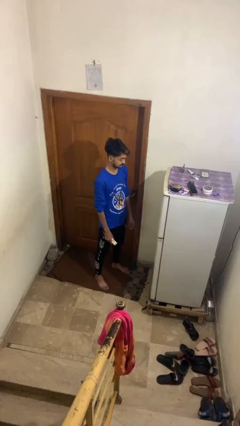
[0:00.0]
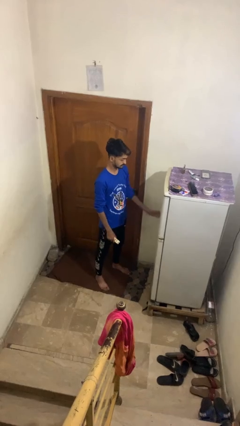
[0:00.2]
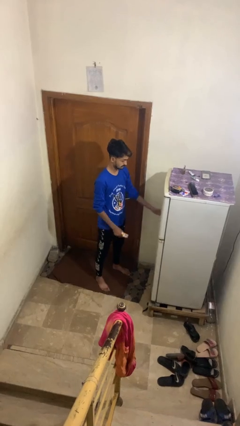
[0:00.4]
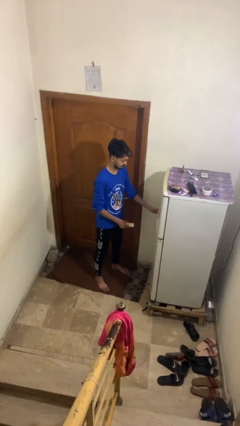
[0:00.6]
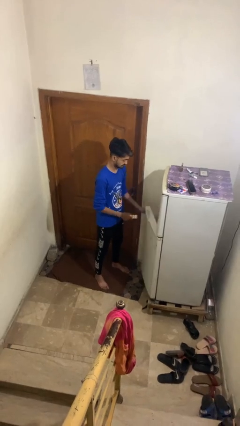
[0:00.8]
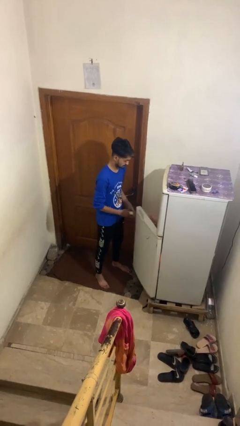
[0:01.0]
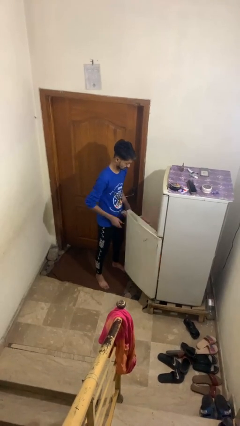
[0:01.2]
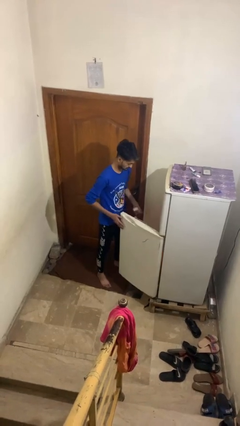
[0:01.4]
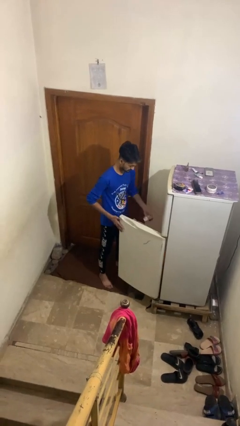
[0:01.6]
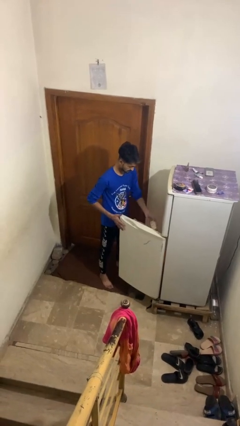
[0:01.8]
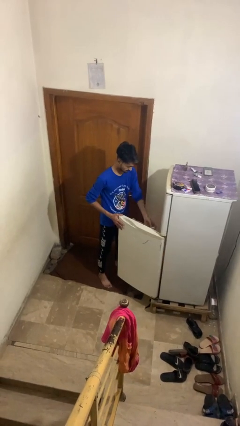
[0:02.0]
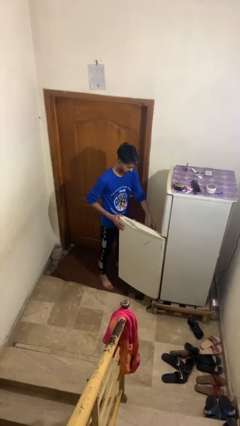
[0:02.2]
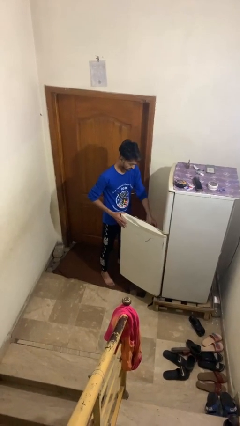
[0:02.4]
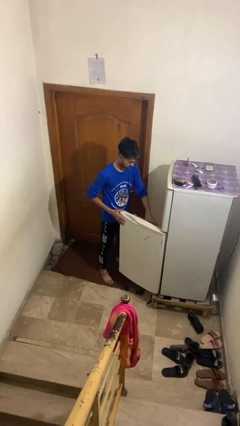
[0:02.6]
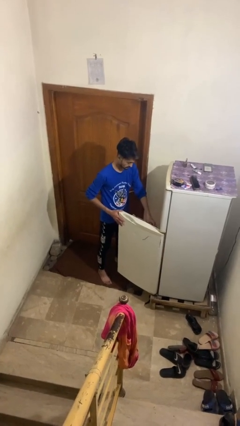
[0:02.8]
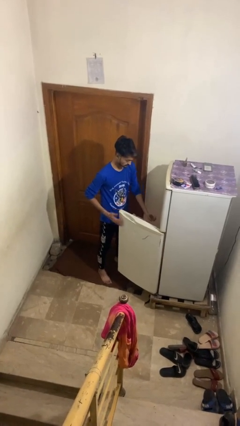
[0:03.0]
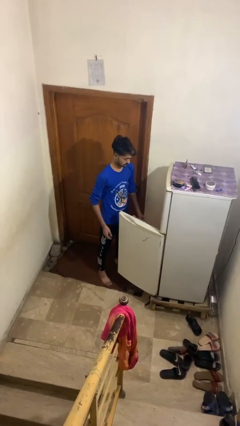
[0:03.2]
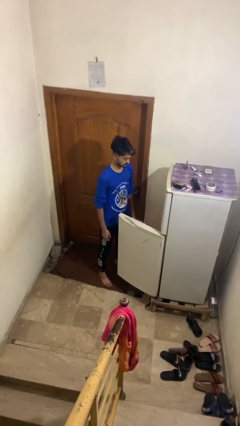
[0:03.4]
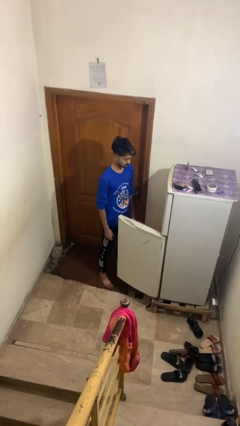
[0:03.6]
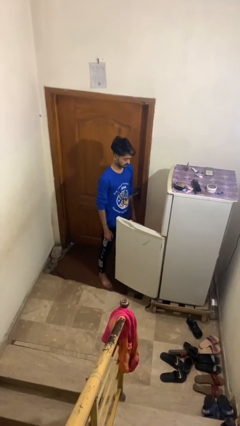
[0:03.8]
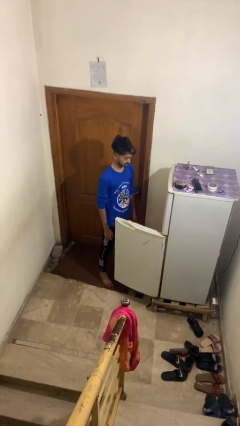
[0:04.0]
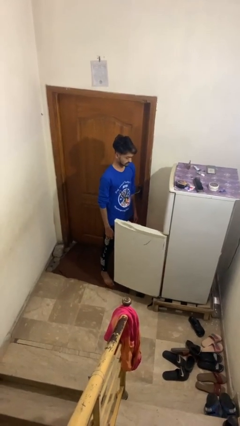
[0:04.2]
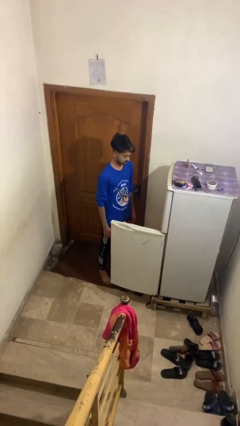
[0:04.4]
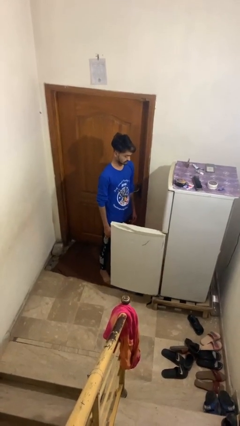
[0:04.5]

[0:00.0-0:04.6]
person puts object into refrigerator

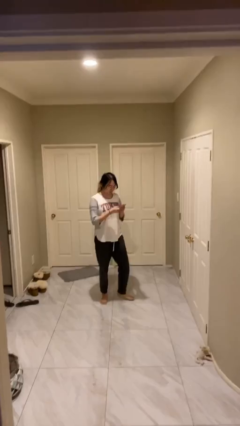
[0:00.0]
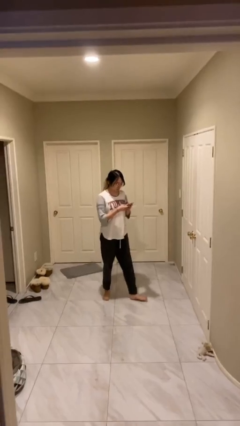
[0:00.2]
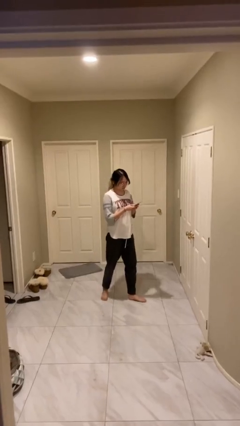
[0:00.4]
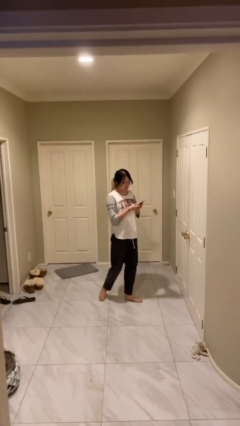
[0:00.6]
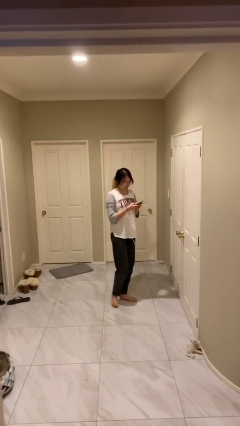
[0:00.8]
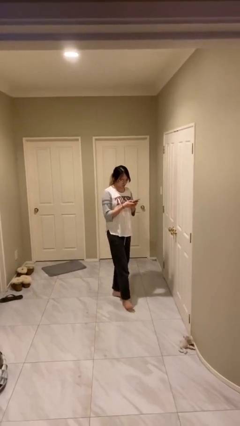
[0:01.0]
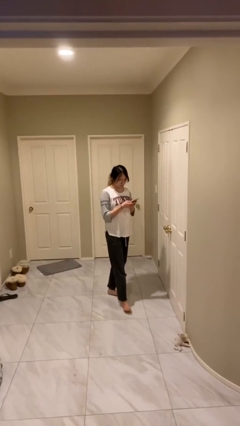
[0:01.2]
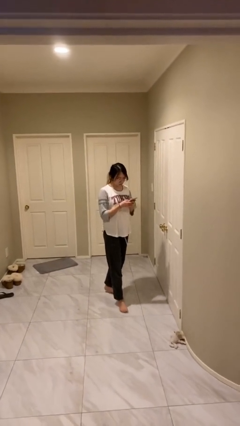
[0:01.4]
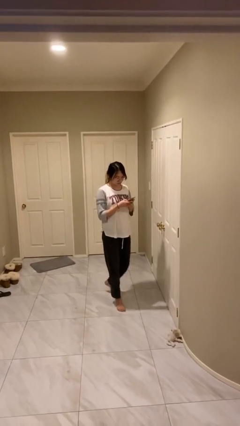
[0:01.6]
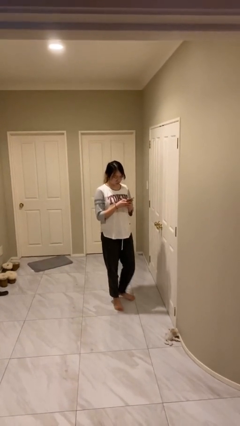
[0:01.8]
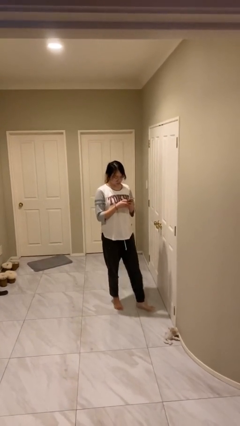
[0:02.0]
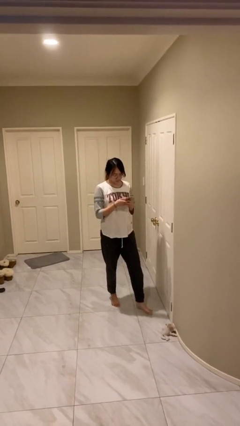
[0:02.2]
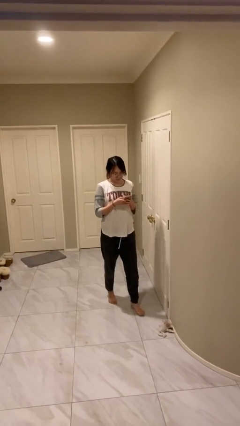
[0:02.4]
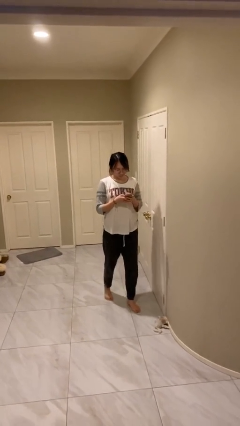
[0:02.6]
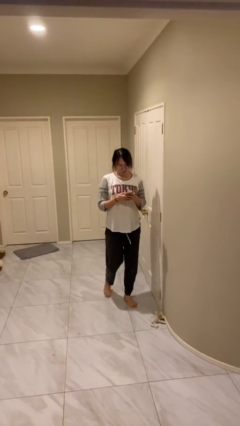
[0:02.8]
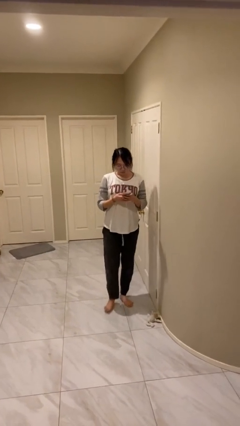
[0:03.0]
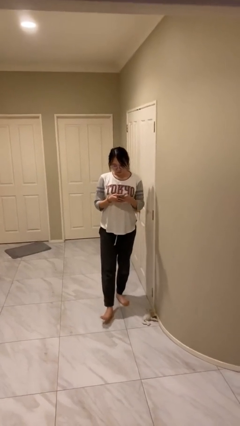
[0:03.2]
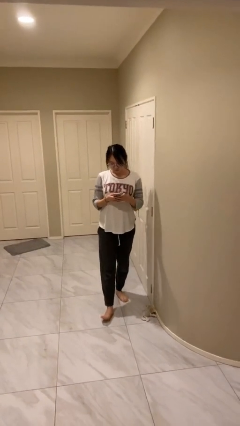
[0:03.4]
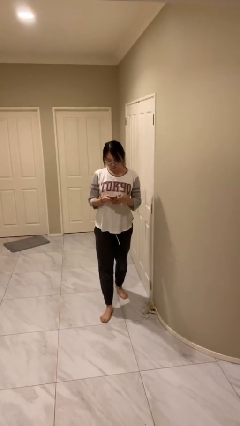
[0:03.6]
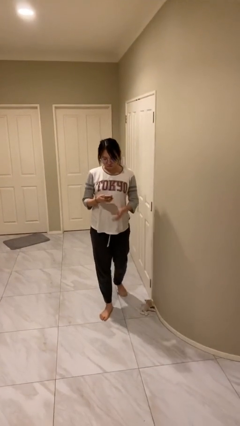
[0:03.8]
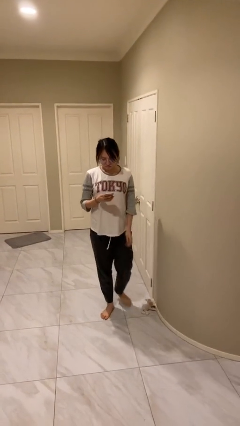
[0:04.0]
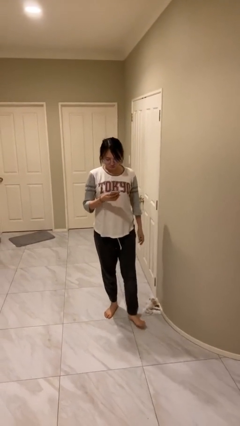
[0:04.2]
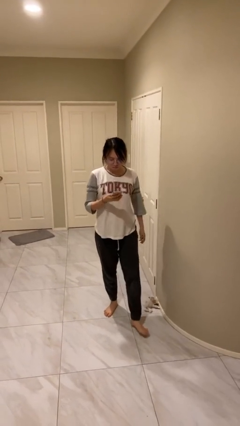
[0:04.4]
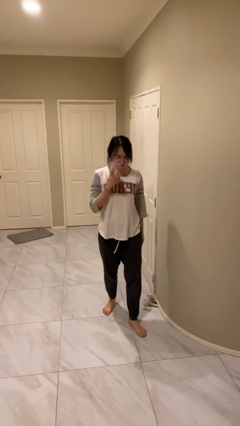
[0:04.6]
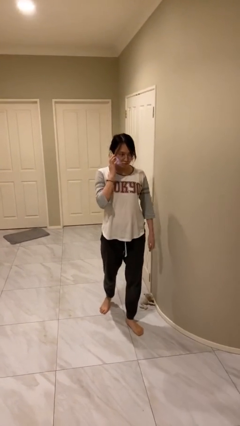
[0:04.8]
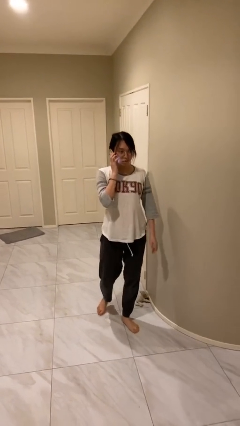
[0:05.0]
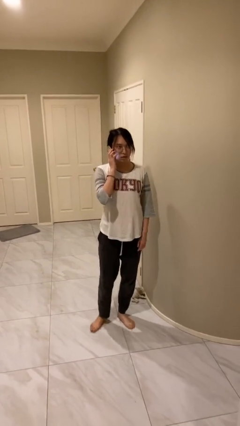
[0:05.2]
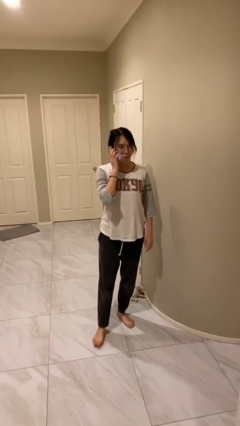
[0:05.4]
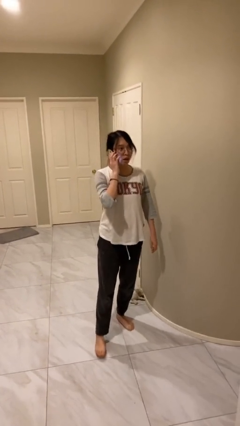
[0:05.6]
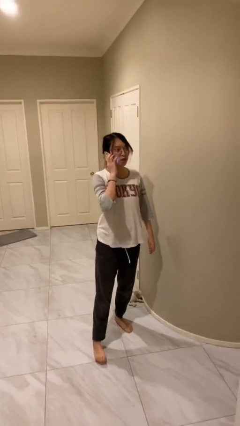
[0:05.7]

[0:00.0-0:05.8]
person texts on phone

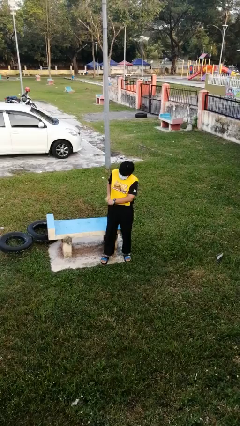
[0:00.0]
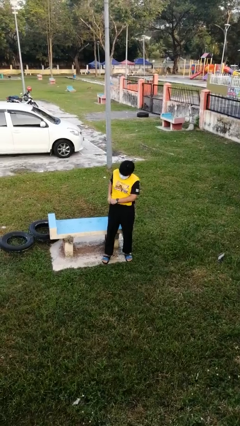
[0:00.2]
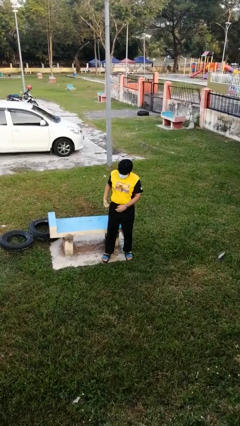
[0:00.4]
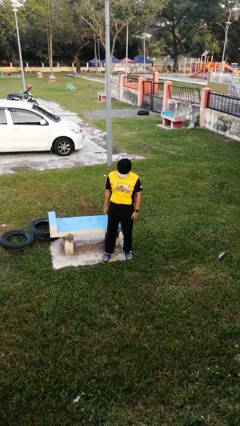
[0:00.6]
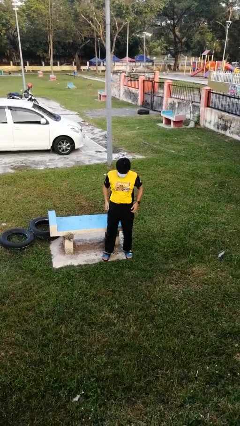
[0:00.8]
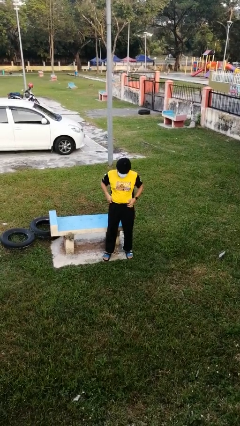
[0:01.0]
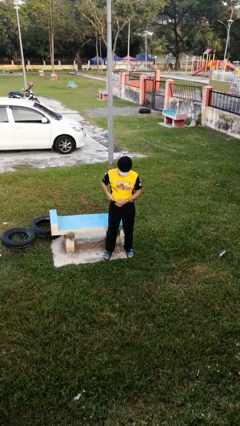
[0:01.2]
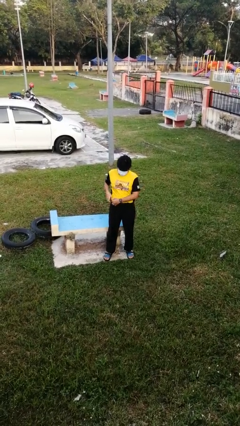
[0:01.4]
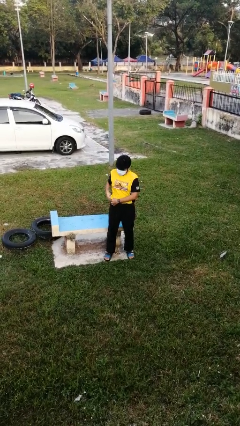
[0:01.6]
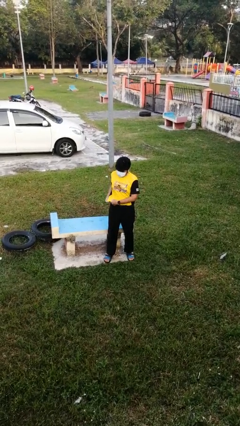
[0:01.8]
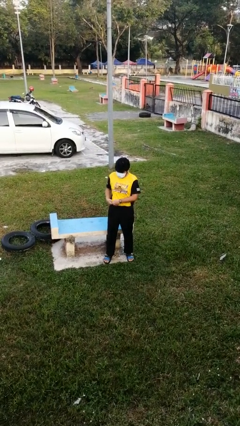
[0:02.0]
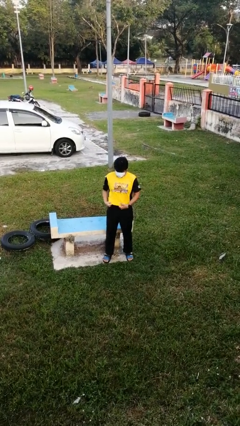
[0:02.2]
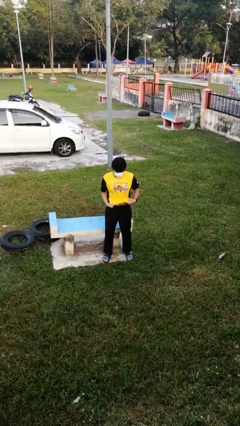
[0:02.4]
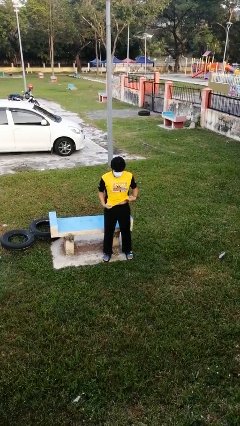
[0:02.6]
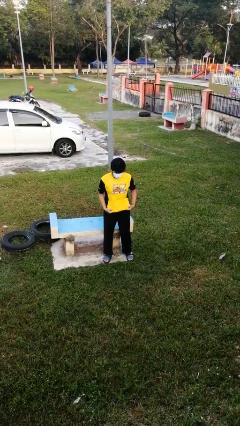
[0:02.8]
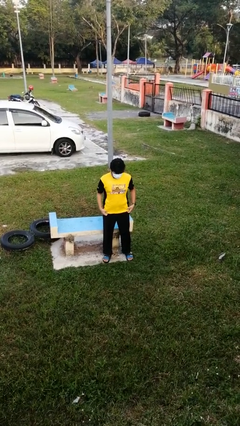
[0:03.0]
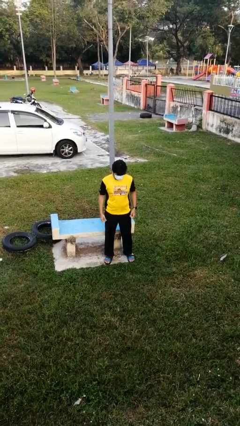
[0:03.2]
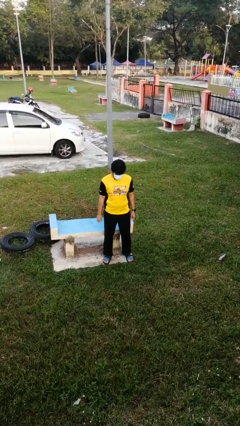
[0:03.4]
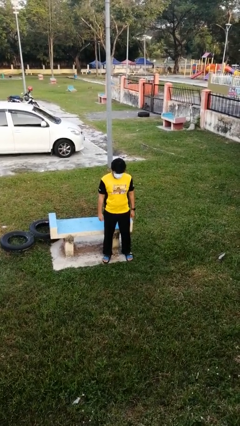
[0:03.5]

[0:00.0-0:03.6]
person untucks shirt

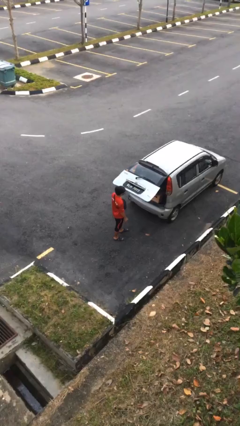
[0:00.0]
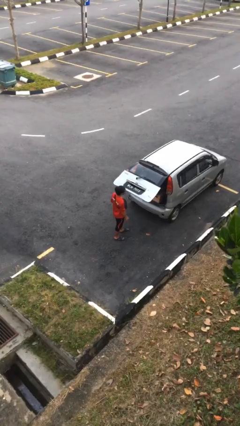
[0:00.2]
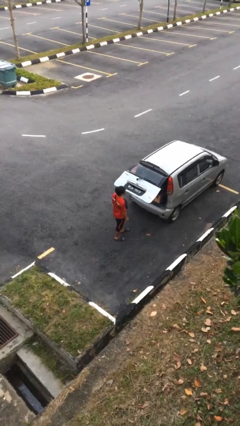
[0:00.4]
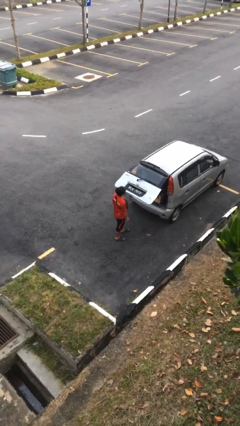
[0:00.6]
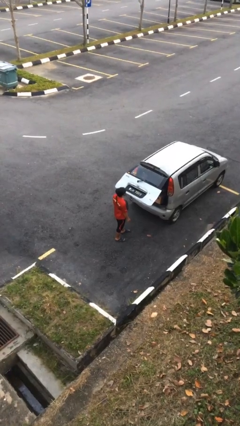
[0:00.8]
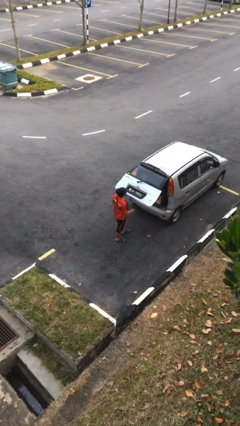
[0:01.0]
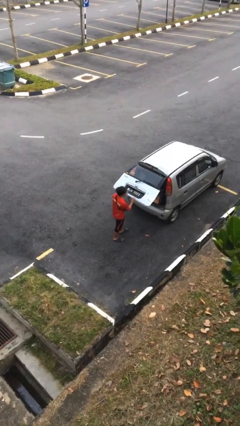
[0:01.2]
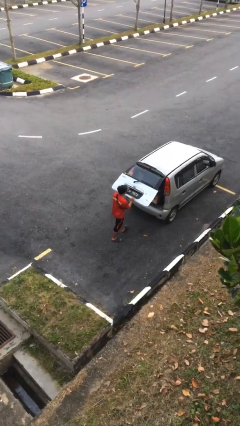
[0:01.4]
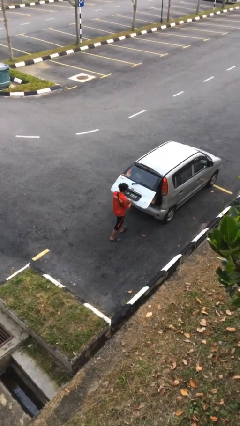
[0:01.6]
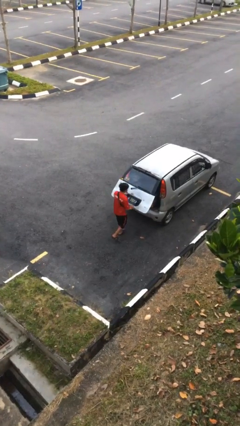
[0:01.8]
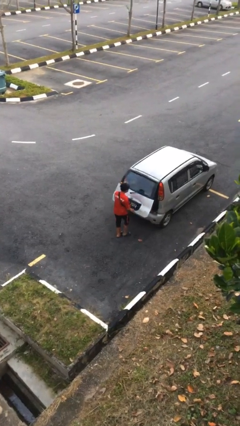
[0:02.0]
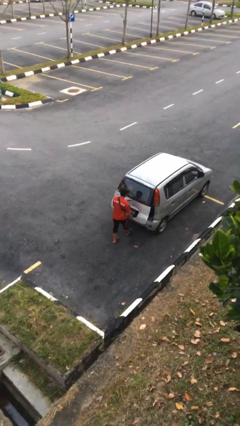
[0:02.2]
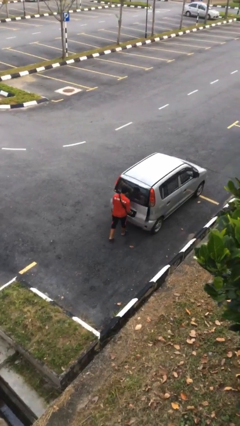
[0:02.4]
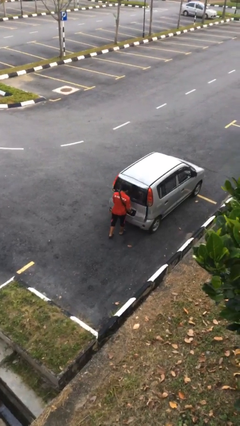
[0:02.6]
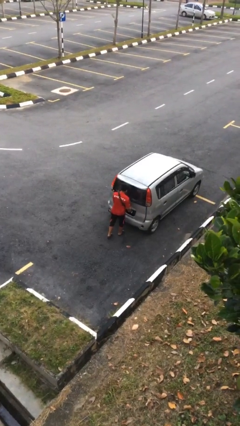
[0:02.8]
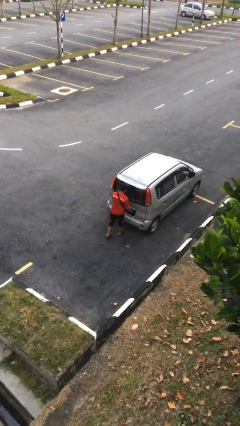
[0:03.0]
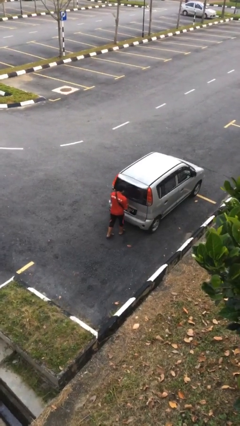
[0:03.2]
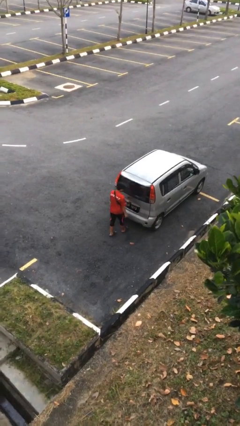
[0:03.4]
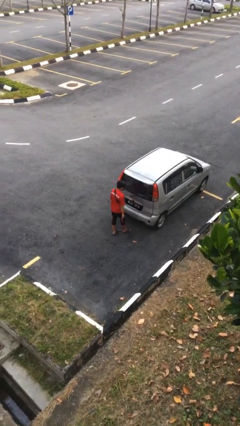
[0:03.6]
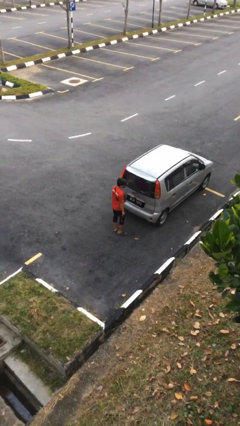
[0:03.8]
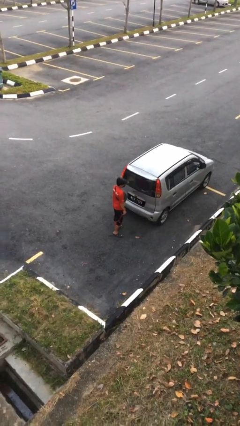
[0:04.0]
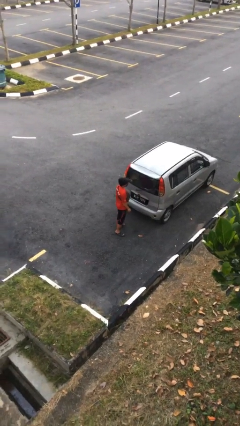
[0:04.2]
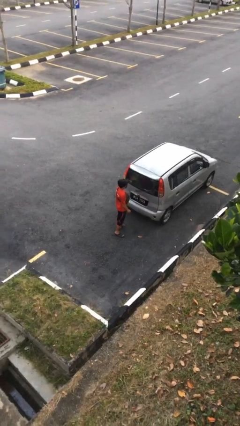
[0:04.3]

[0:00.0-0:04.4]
person closes car trunk
